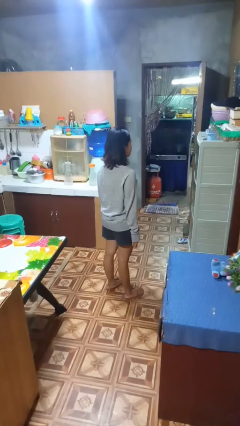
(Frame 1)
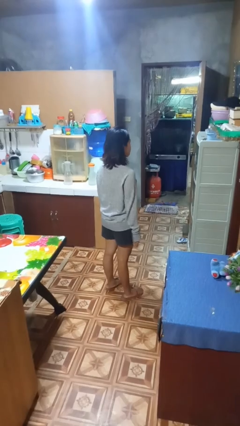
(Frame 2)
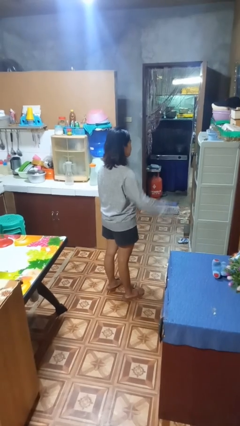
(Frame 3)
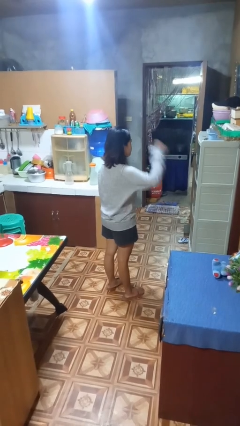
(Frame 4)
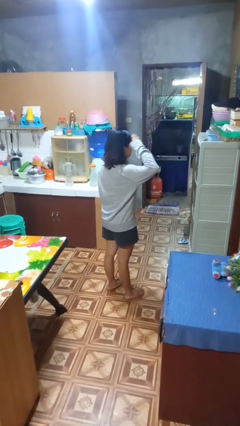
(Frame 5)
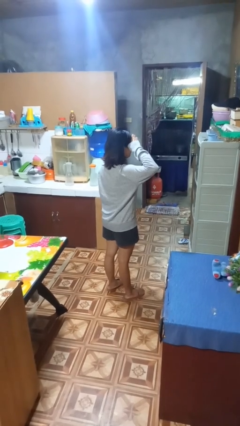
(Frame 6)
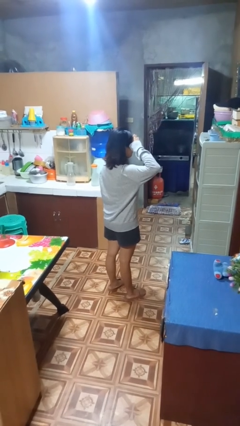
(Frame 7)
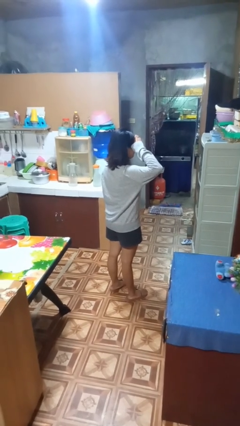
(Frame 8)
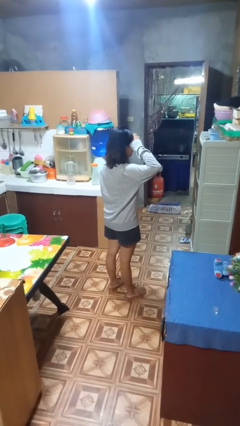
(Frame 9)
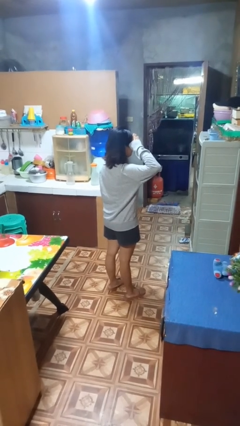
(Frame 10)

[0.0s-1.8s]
person salutes

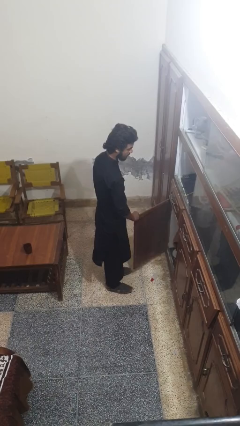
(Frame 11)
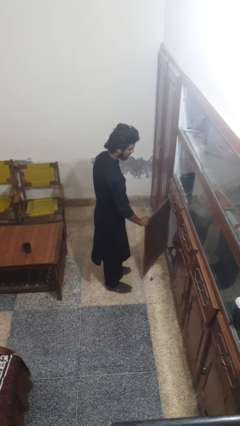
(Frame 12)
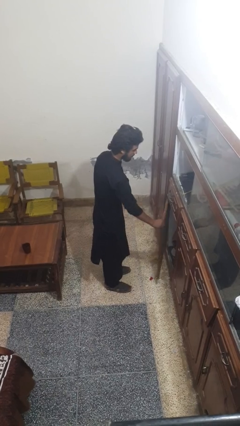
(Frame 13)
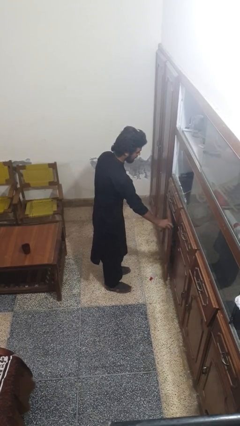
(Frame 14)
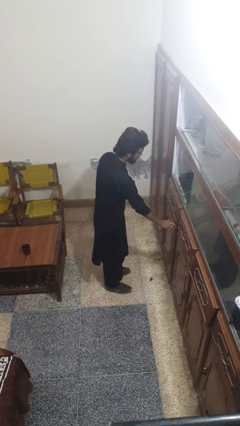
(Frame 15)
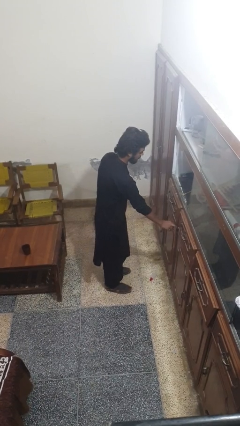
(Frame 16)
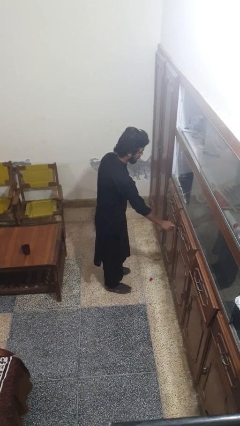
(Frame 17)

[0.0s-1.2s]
person closes cabinet

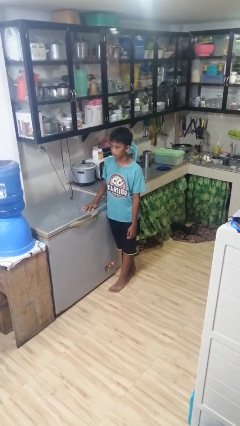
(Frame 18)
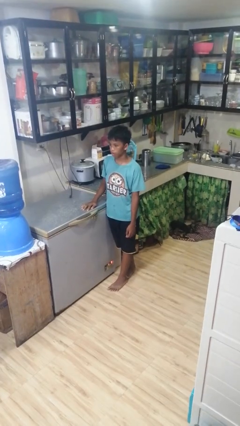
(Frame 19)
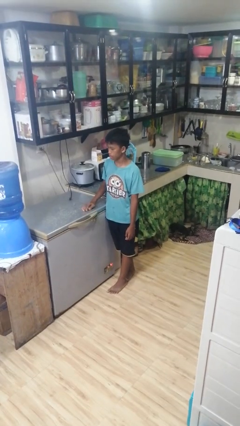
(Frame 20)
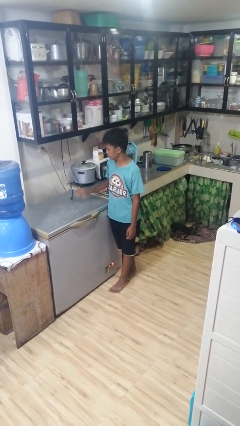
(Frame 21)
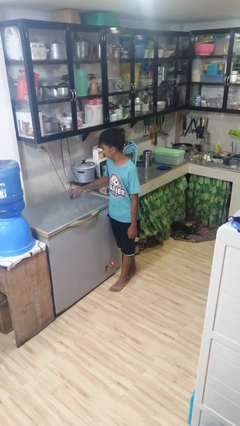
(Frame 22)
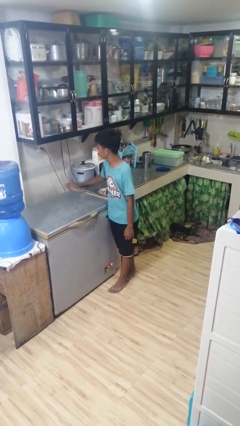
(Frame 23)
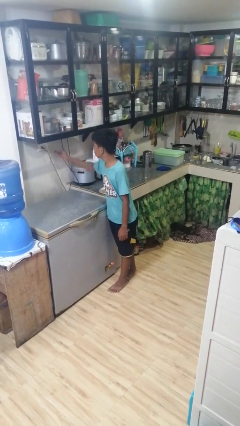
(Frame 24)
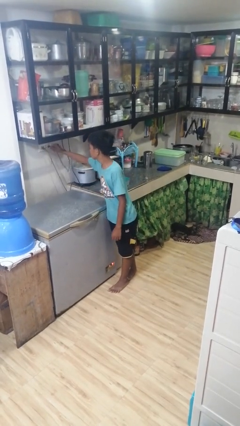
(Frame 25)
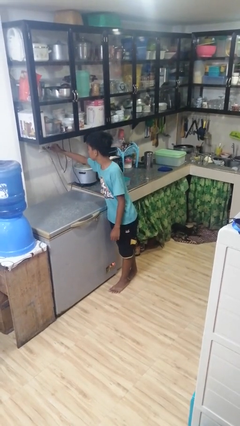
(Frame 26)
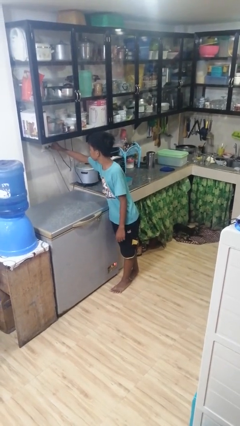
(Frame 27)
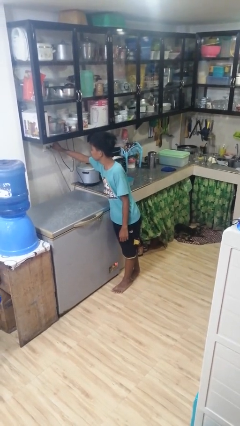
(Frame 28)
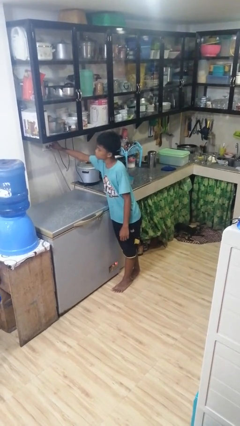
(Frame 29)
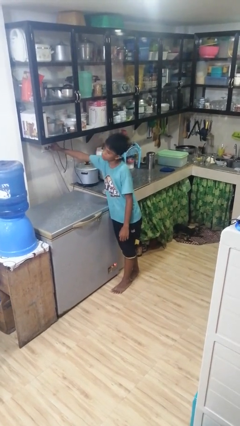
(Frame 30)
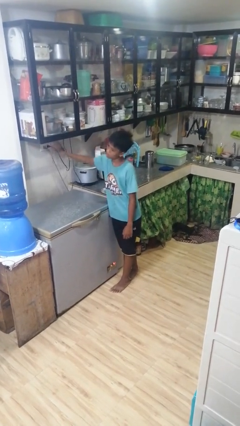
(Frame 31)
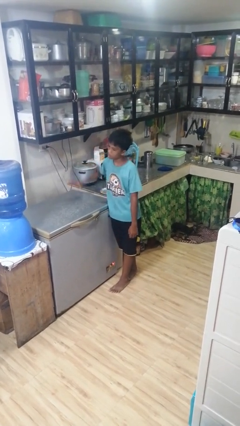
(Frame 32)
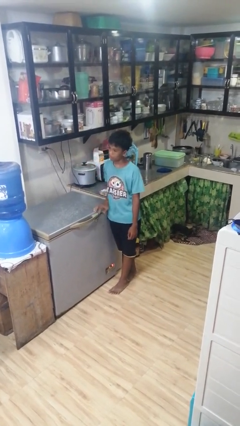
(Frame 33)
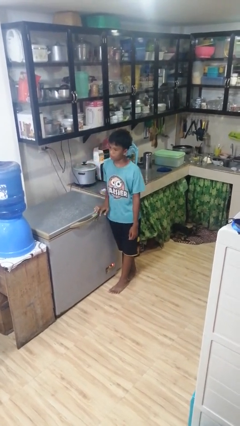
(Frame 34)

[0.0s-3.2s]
person plugs into electrical socket

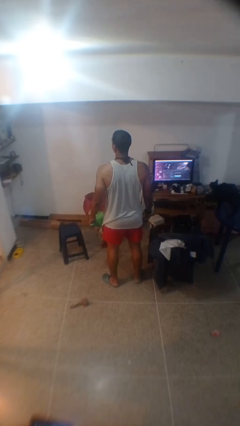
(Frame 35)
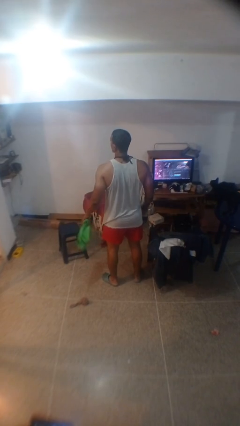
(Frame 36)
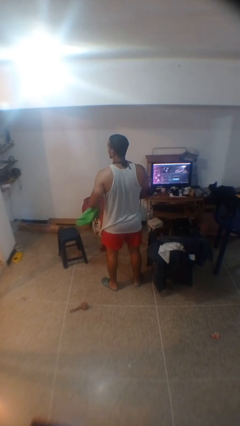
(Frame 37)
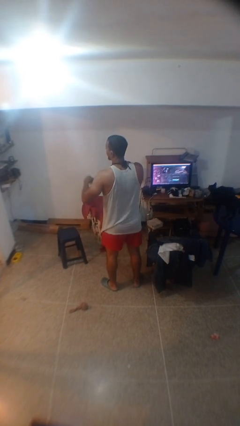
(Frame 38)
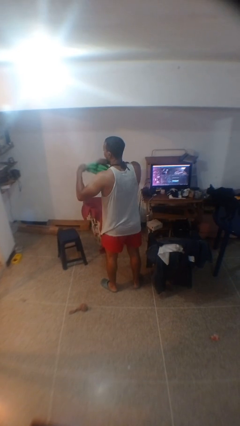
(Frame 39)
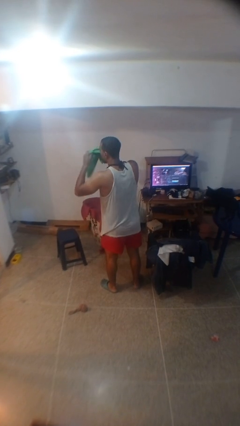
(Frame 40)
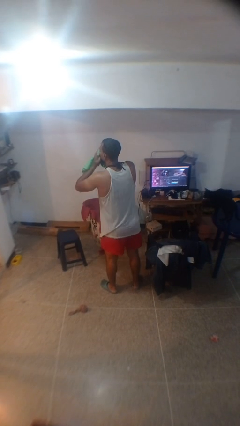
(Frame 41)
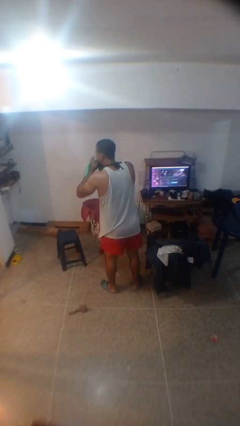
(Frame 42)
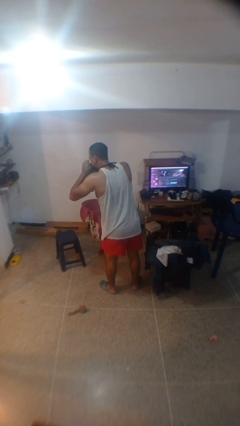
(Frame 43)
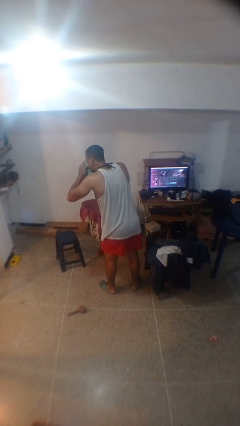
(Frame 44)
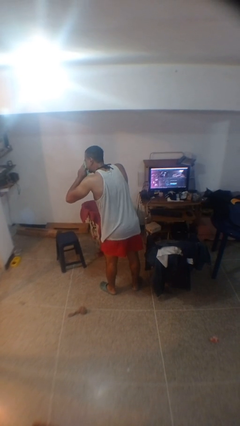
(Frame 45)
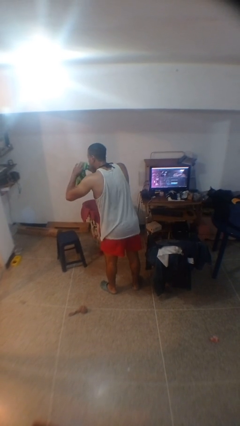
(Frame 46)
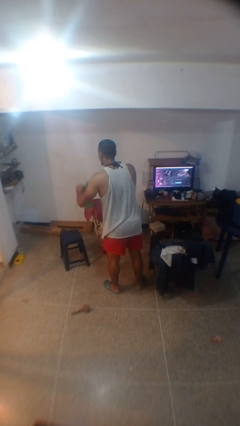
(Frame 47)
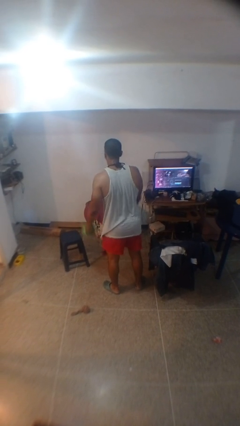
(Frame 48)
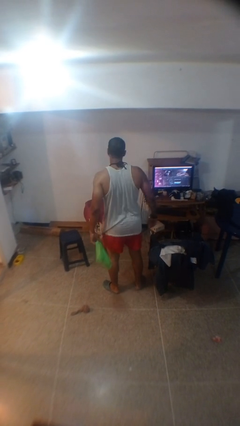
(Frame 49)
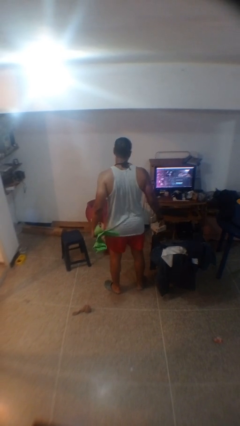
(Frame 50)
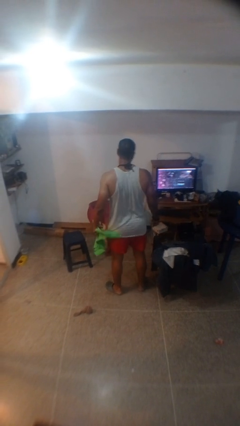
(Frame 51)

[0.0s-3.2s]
person blows nose

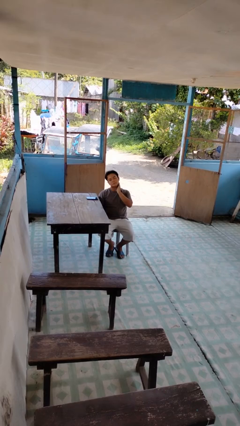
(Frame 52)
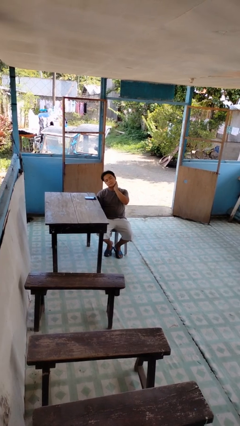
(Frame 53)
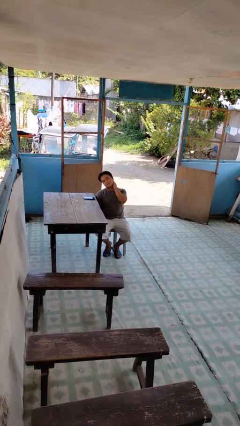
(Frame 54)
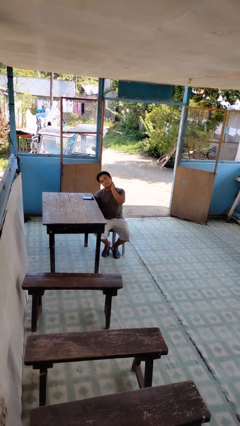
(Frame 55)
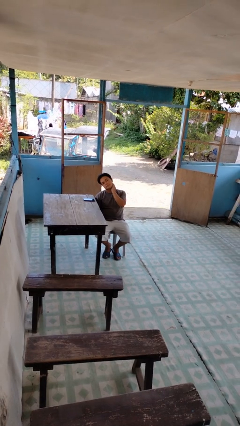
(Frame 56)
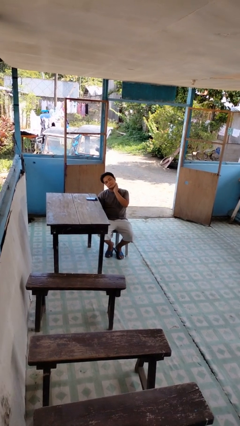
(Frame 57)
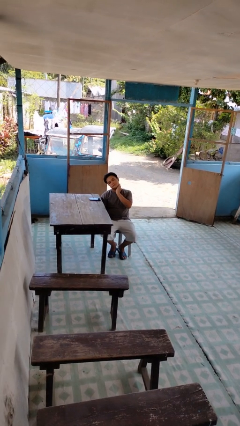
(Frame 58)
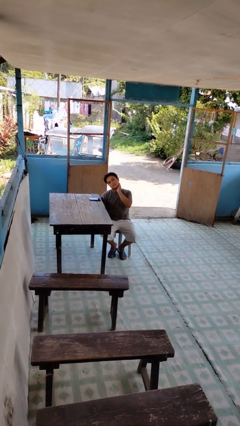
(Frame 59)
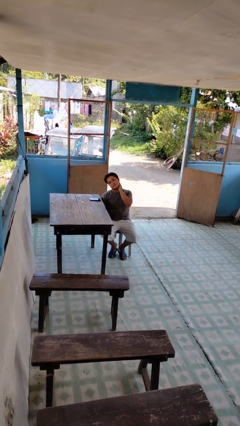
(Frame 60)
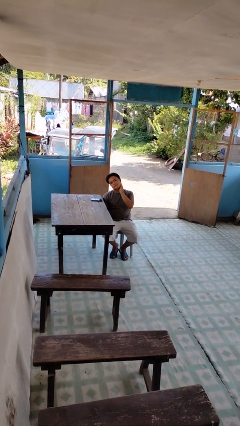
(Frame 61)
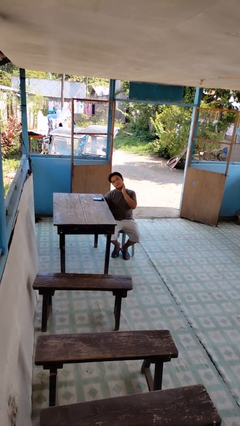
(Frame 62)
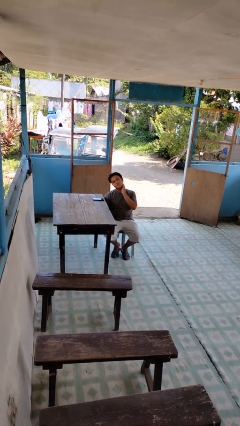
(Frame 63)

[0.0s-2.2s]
person rubs neck

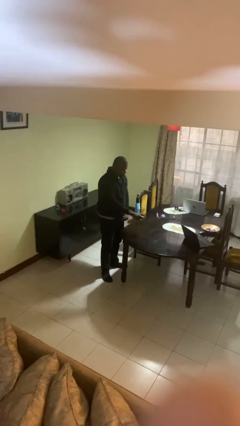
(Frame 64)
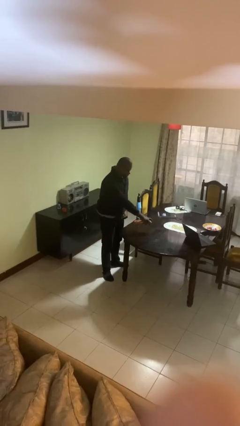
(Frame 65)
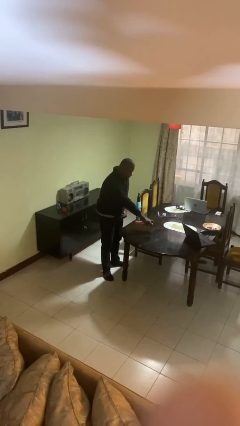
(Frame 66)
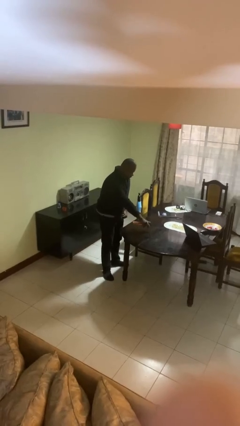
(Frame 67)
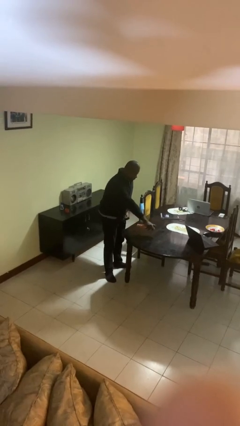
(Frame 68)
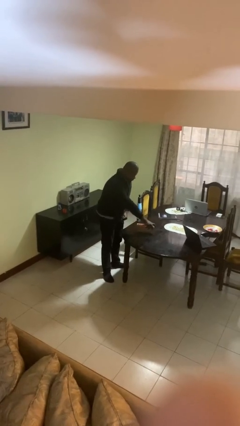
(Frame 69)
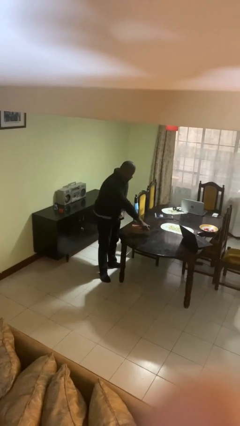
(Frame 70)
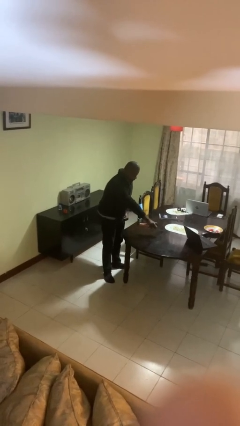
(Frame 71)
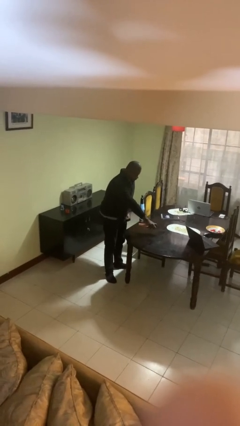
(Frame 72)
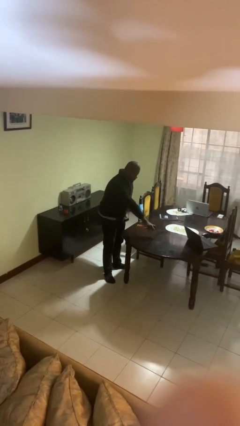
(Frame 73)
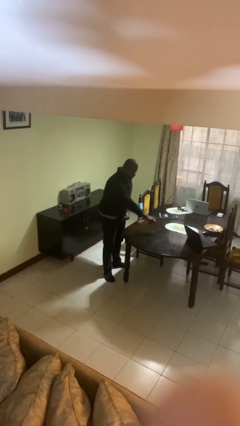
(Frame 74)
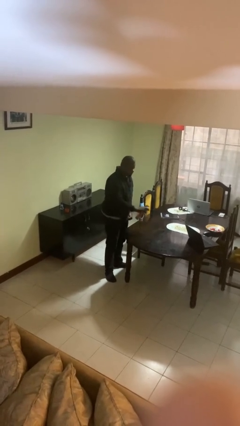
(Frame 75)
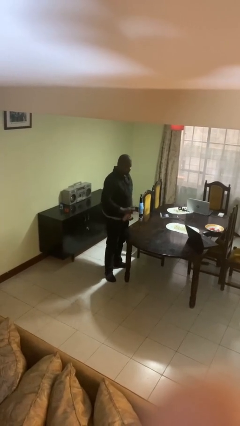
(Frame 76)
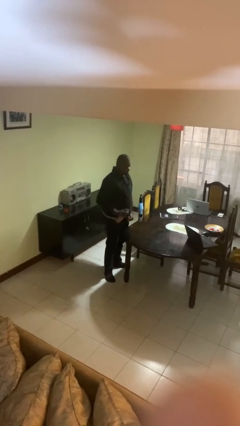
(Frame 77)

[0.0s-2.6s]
person sprays from bottle

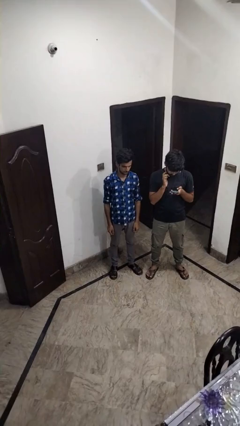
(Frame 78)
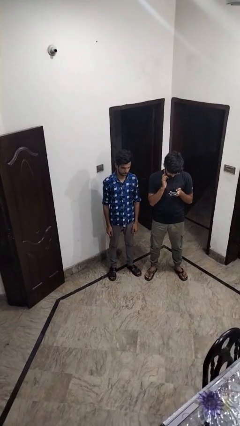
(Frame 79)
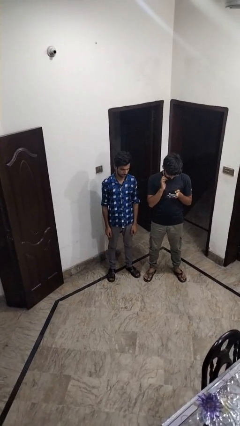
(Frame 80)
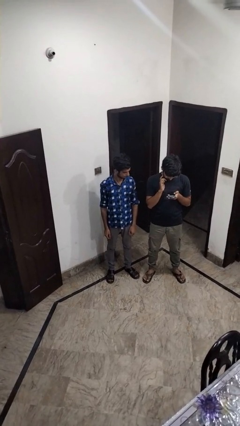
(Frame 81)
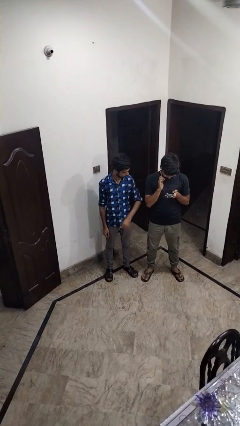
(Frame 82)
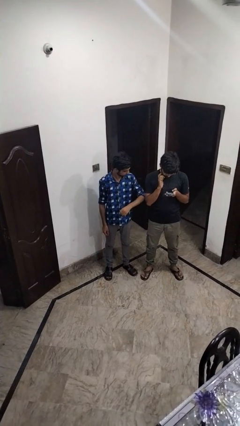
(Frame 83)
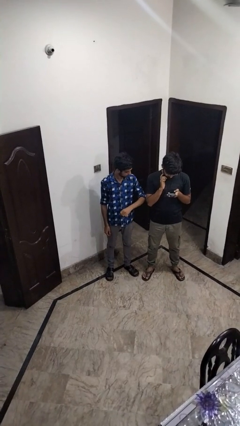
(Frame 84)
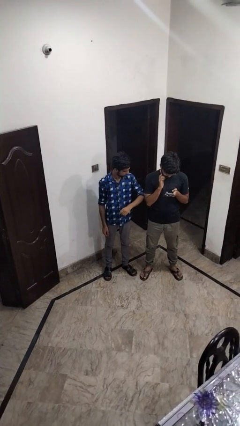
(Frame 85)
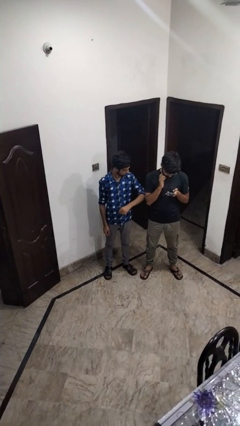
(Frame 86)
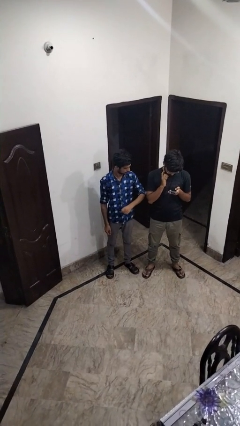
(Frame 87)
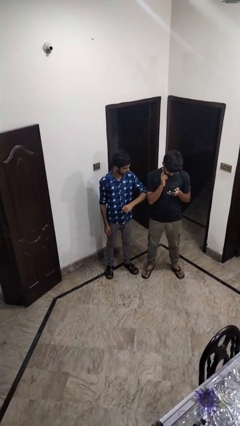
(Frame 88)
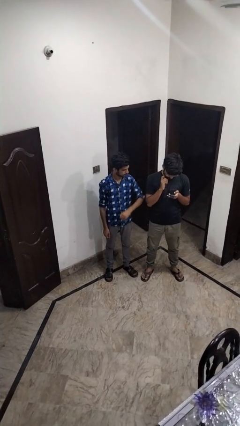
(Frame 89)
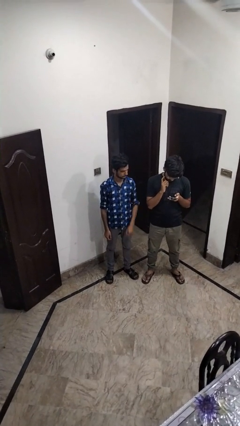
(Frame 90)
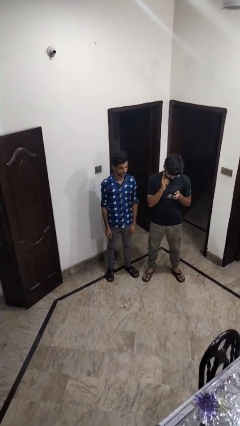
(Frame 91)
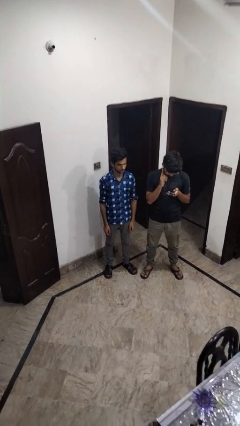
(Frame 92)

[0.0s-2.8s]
person nudges person with elbow
